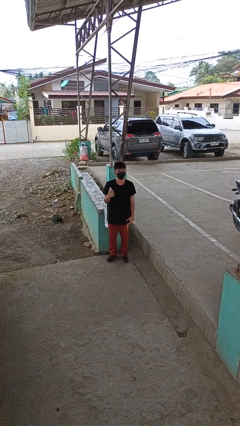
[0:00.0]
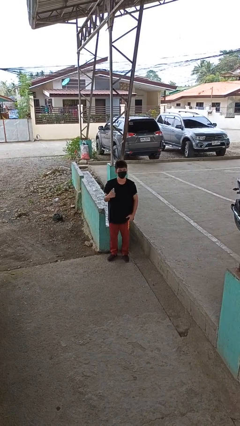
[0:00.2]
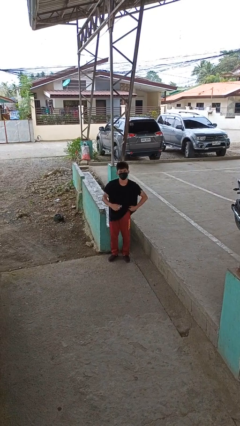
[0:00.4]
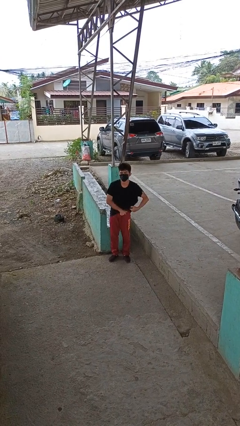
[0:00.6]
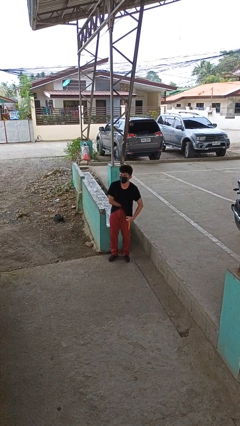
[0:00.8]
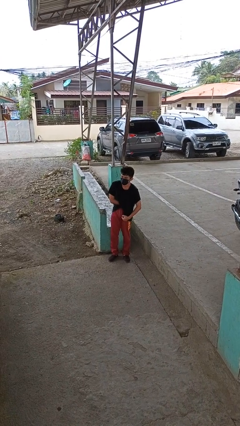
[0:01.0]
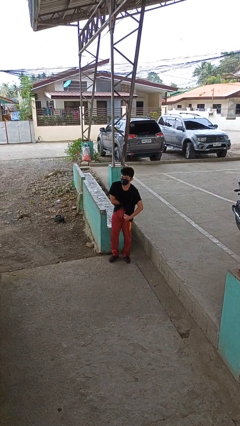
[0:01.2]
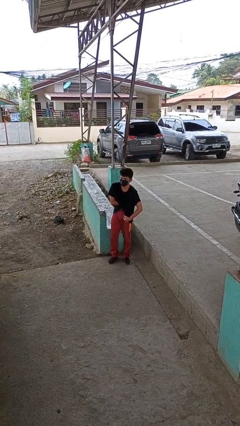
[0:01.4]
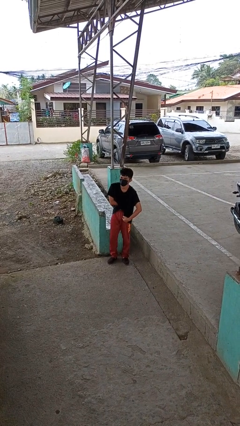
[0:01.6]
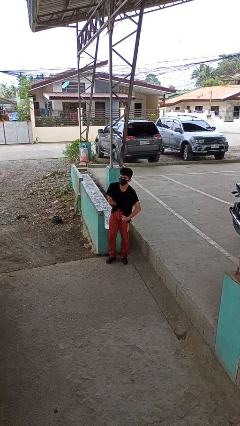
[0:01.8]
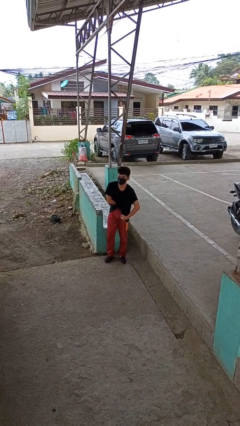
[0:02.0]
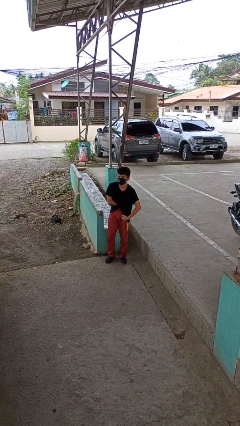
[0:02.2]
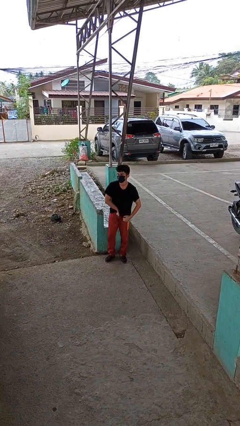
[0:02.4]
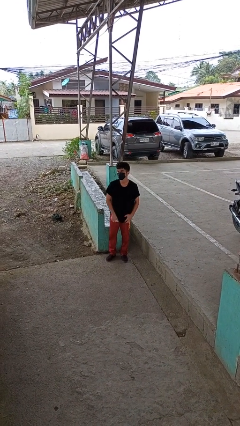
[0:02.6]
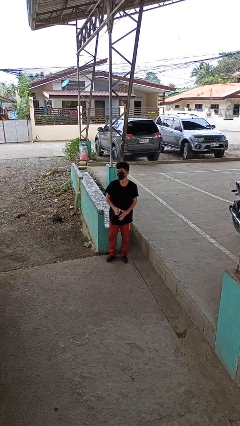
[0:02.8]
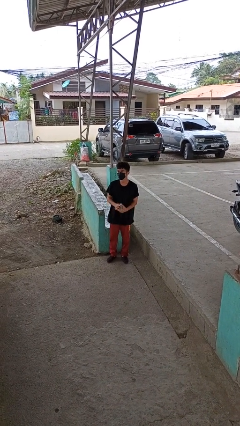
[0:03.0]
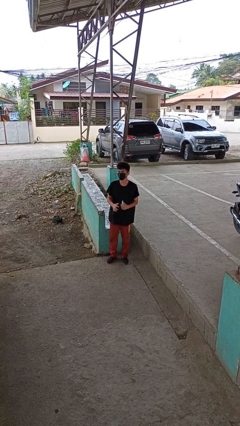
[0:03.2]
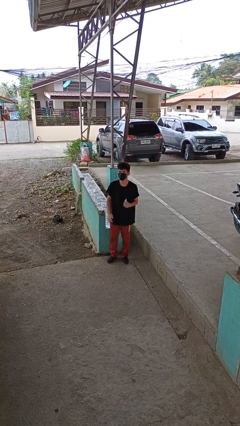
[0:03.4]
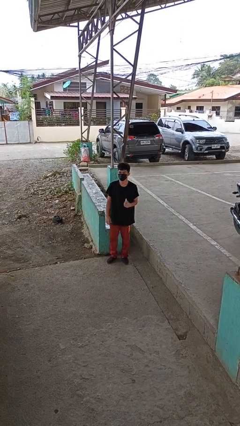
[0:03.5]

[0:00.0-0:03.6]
person applies deodorant

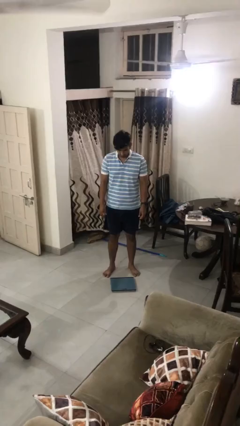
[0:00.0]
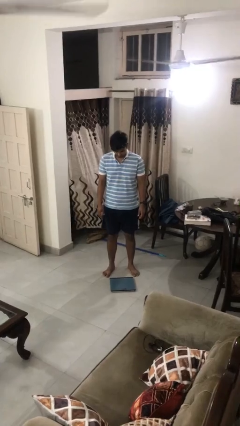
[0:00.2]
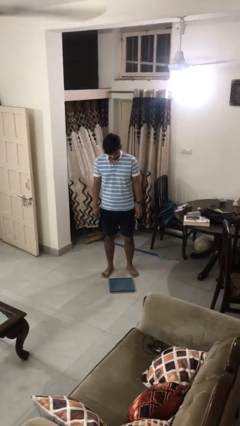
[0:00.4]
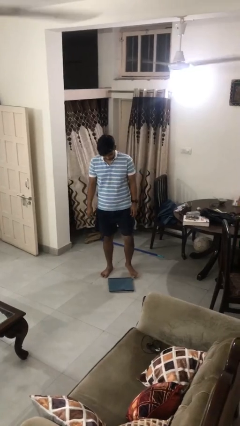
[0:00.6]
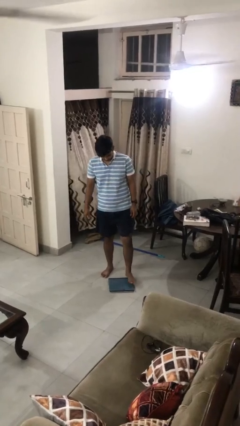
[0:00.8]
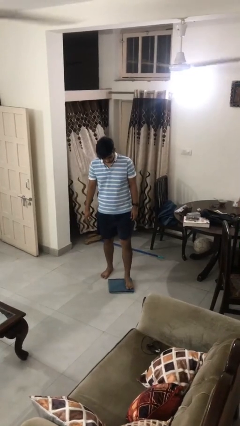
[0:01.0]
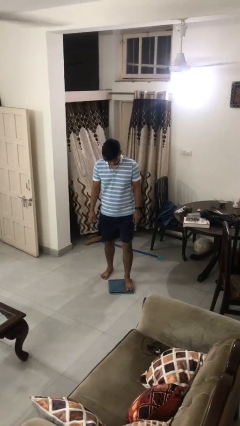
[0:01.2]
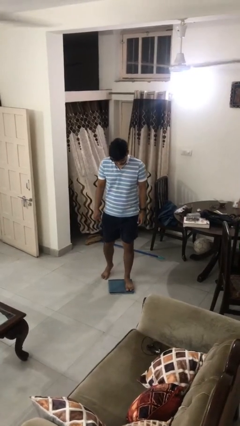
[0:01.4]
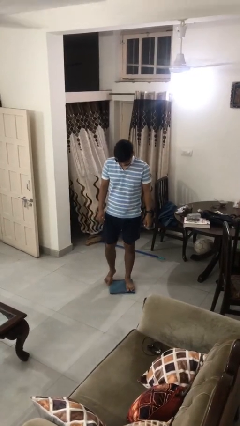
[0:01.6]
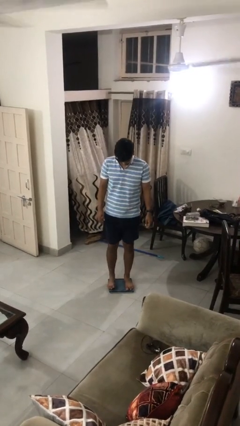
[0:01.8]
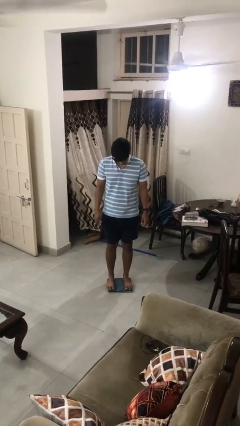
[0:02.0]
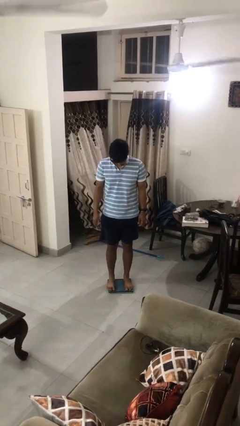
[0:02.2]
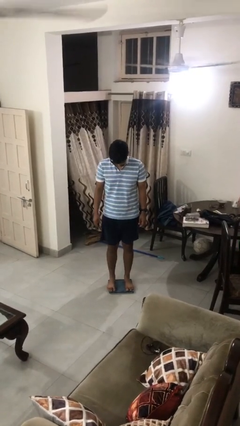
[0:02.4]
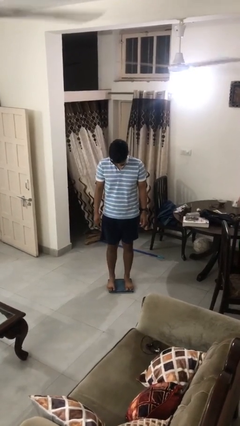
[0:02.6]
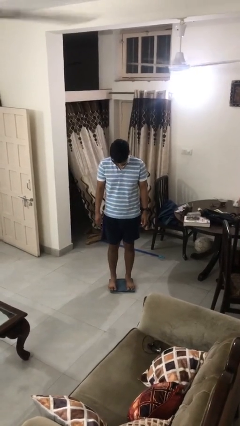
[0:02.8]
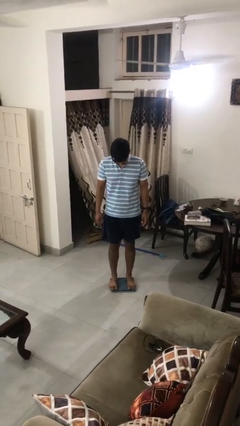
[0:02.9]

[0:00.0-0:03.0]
person uses bodyweight scale

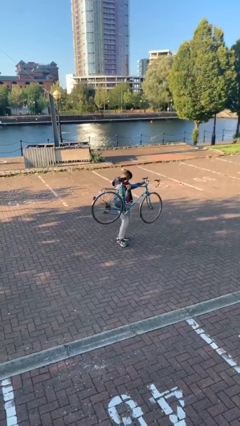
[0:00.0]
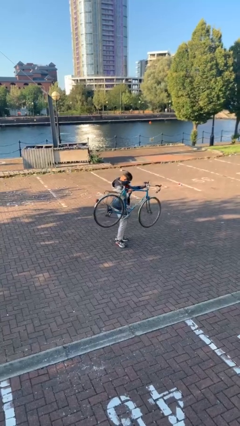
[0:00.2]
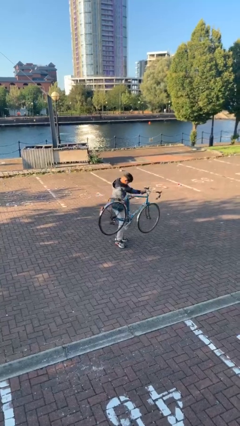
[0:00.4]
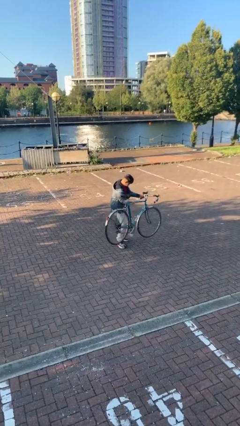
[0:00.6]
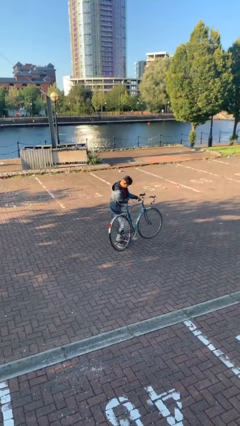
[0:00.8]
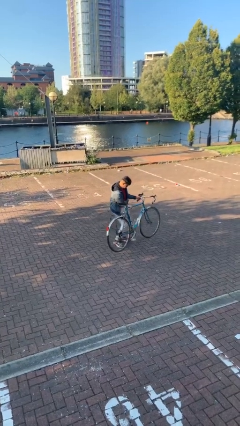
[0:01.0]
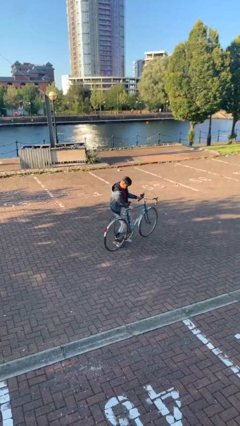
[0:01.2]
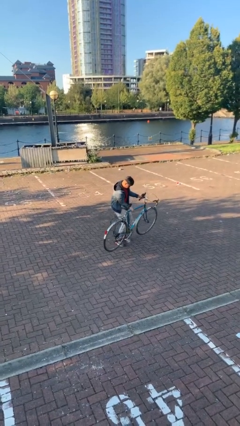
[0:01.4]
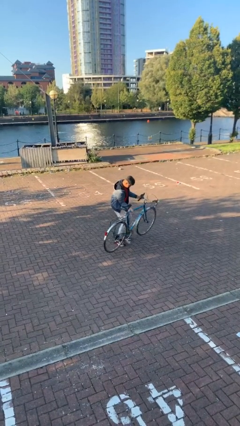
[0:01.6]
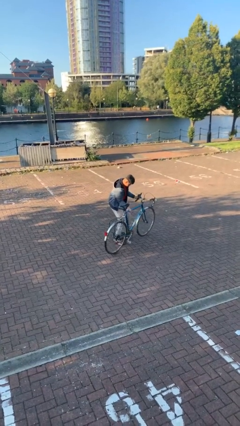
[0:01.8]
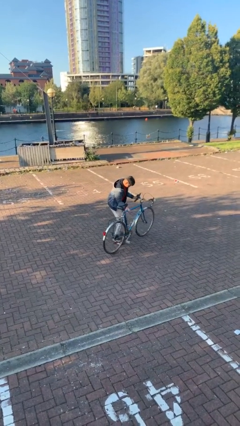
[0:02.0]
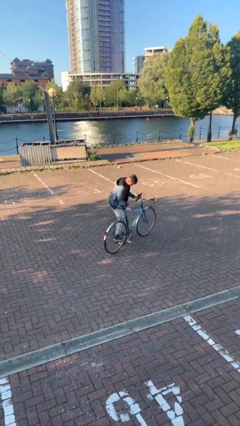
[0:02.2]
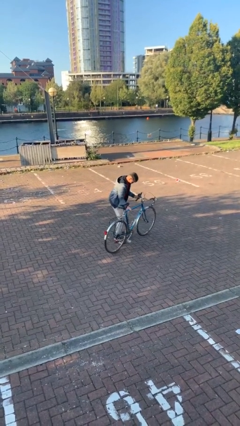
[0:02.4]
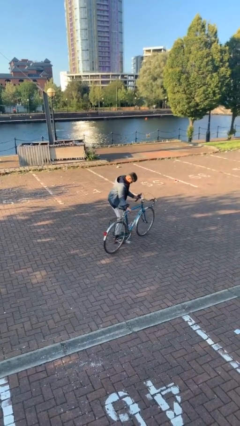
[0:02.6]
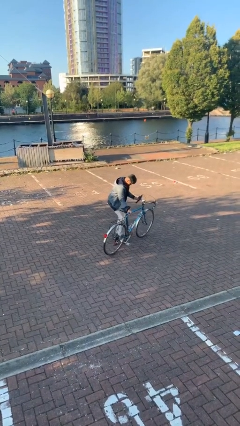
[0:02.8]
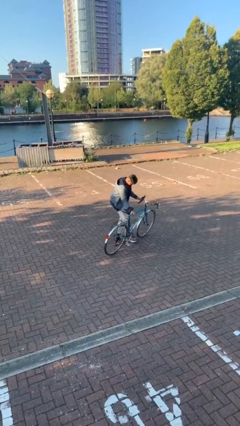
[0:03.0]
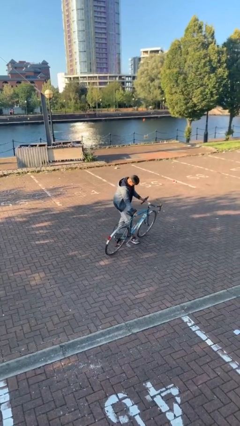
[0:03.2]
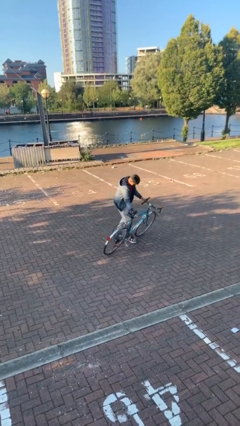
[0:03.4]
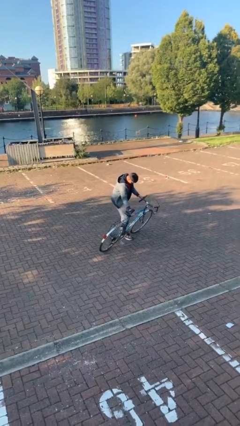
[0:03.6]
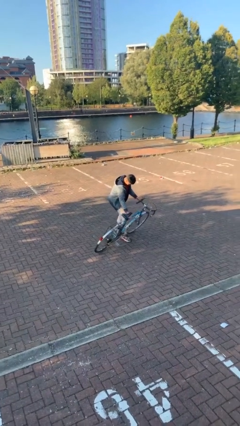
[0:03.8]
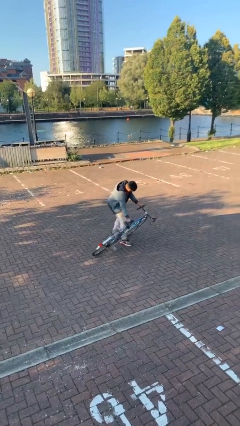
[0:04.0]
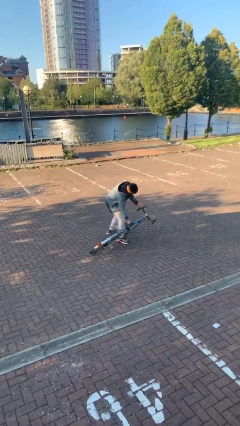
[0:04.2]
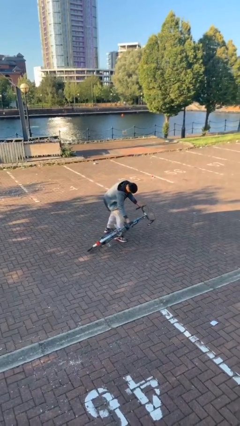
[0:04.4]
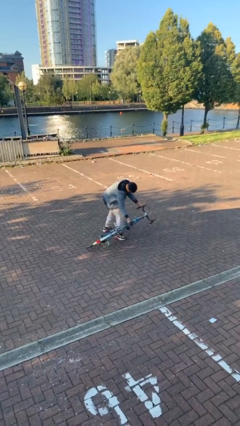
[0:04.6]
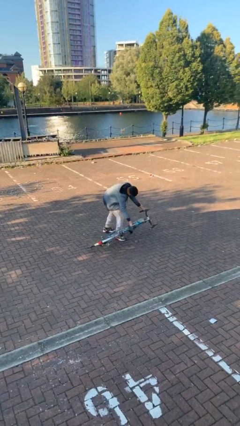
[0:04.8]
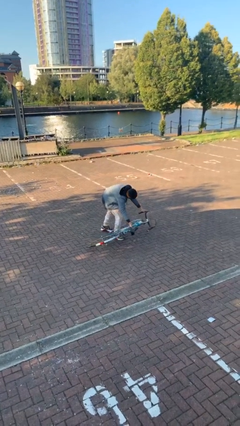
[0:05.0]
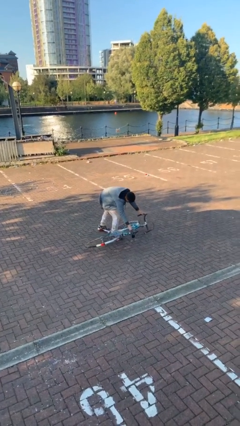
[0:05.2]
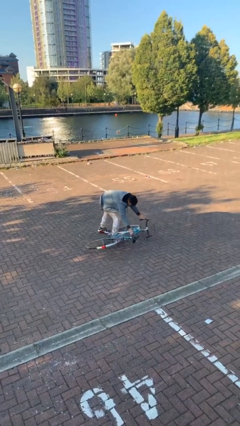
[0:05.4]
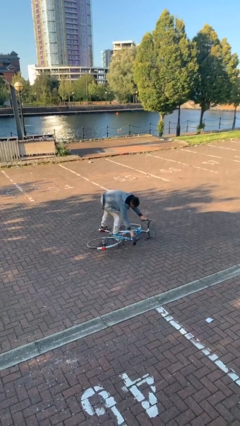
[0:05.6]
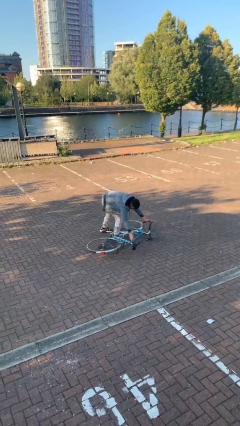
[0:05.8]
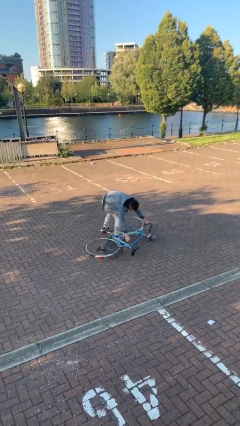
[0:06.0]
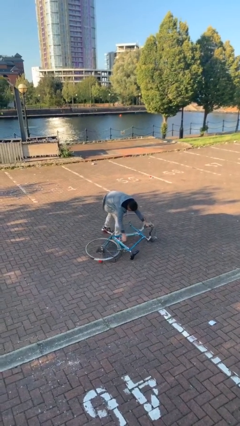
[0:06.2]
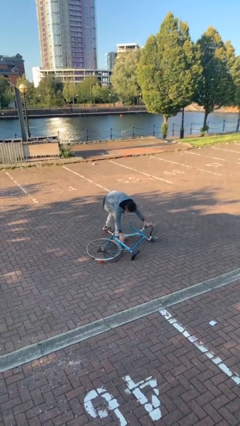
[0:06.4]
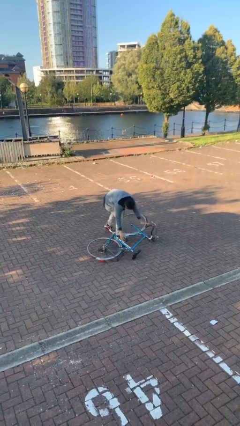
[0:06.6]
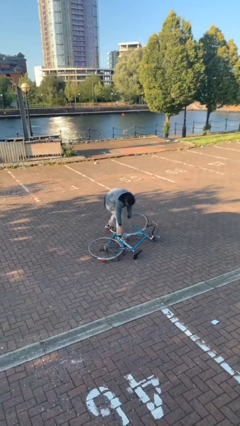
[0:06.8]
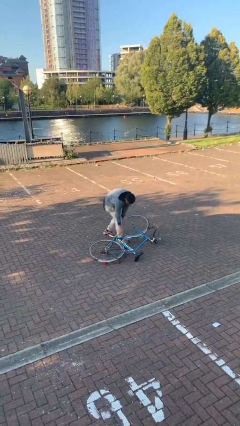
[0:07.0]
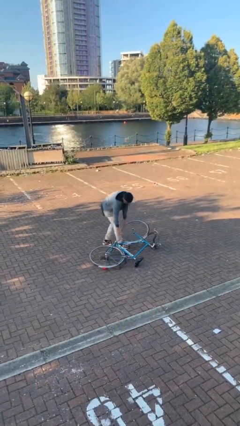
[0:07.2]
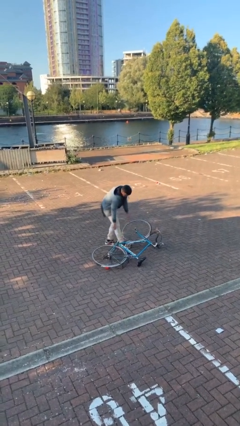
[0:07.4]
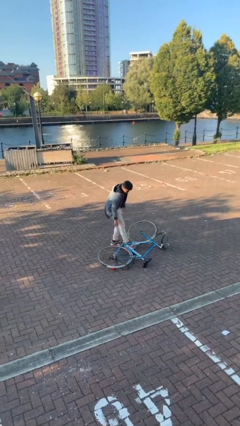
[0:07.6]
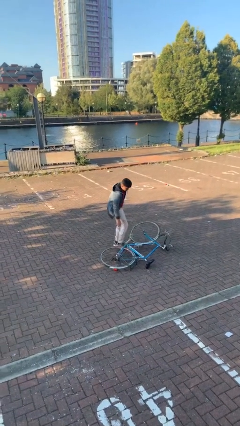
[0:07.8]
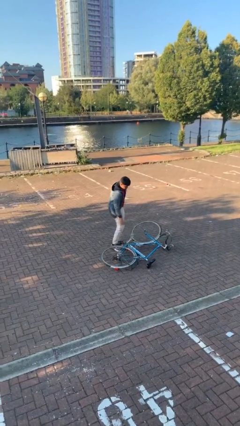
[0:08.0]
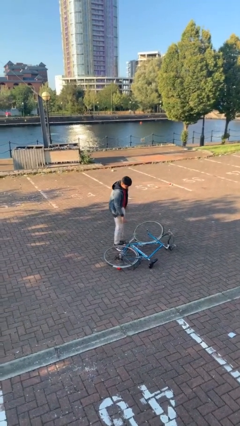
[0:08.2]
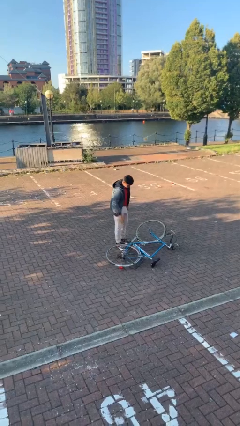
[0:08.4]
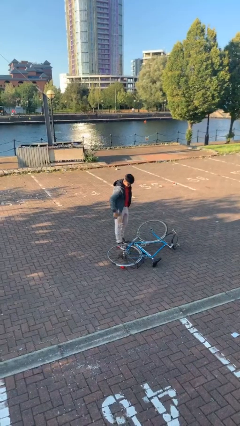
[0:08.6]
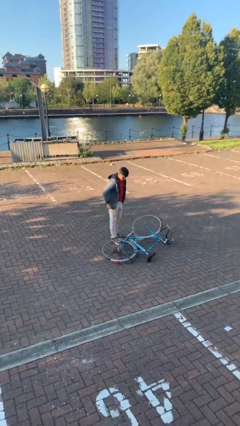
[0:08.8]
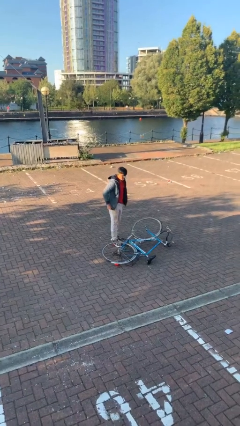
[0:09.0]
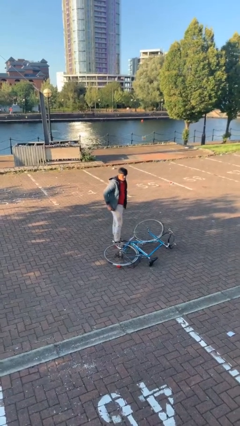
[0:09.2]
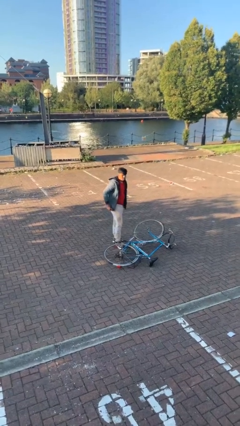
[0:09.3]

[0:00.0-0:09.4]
person puts down object on floor

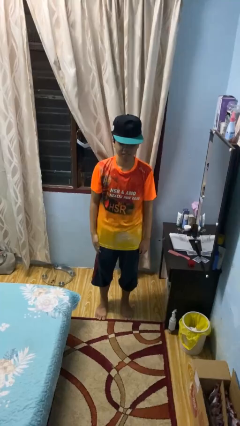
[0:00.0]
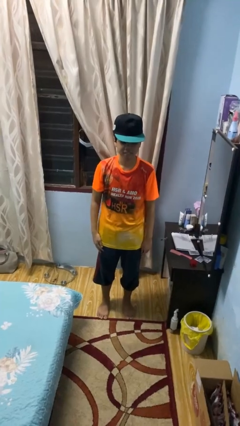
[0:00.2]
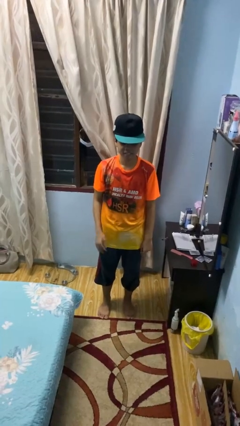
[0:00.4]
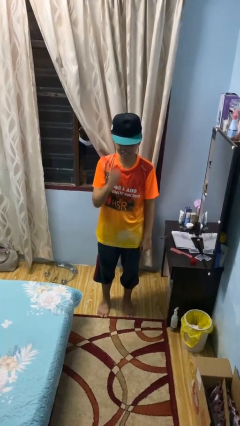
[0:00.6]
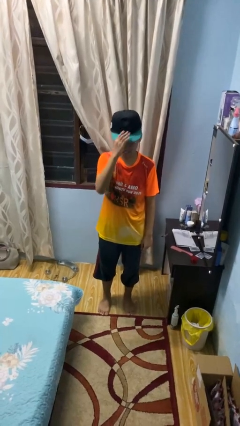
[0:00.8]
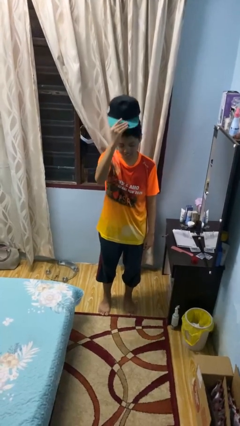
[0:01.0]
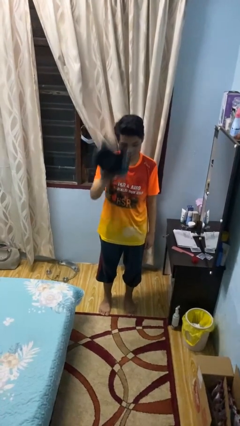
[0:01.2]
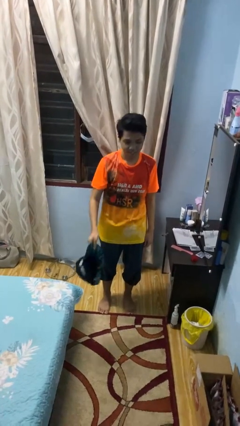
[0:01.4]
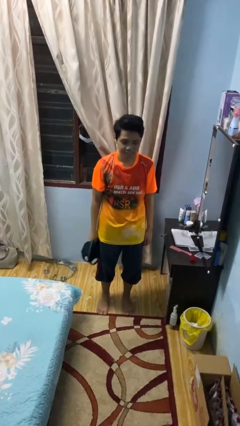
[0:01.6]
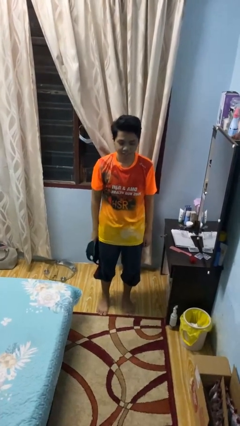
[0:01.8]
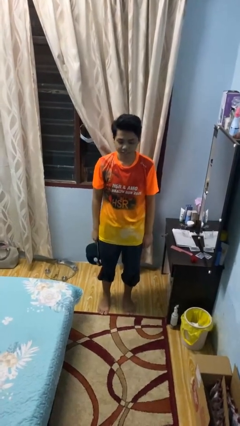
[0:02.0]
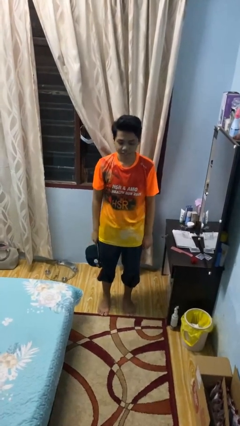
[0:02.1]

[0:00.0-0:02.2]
person takes off hat
